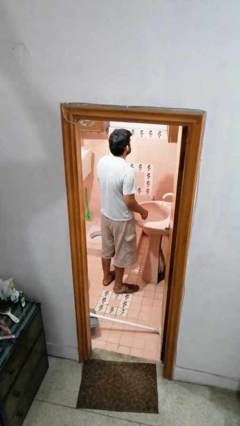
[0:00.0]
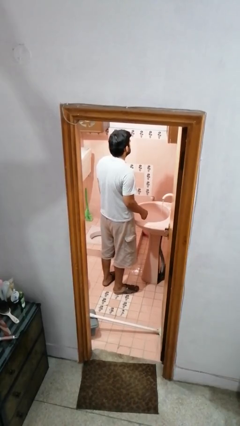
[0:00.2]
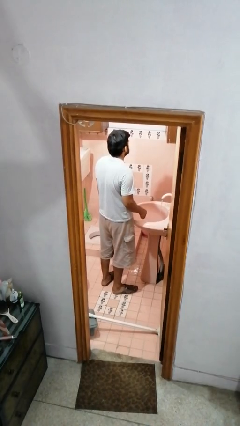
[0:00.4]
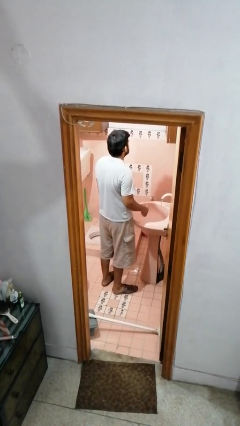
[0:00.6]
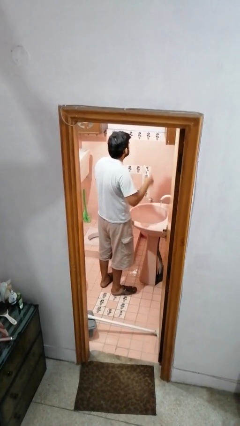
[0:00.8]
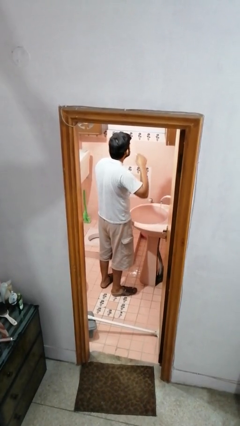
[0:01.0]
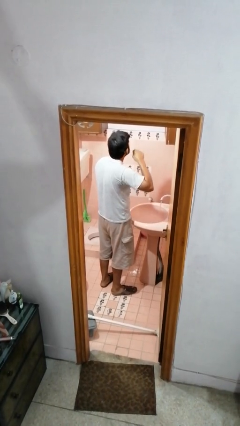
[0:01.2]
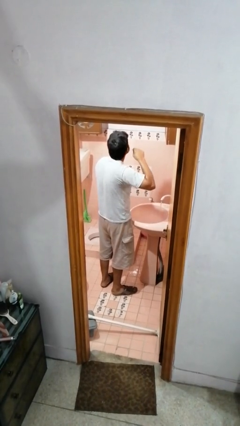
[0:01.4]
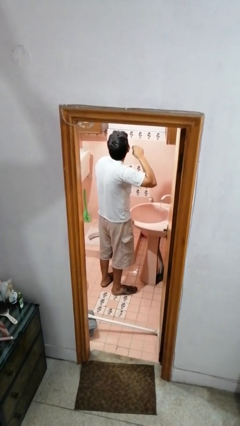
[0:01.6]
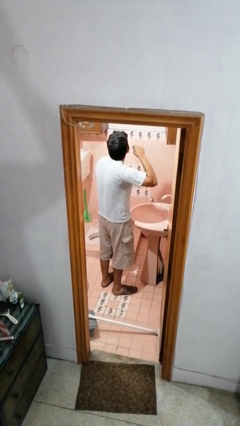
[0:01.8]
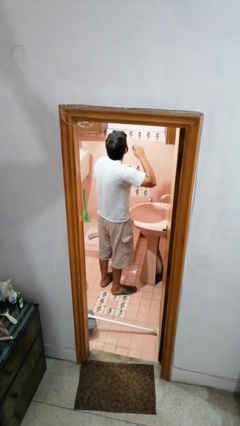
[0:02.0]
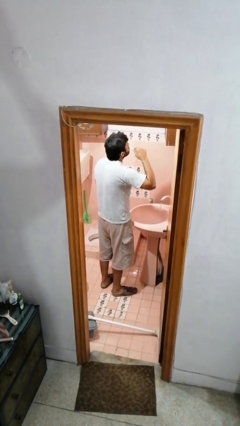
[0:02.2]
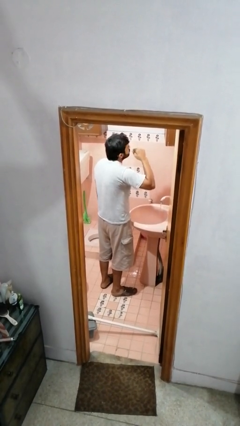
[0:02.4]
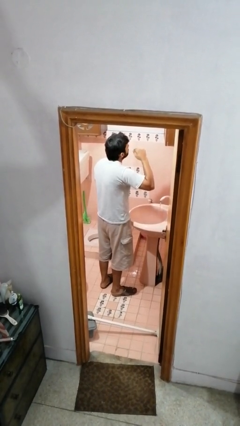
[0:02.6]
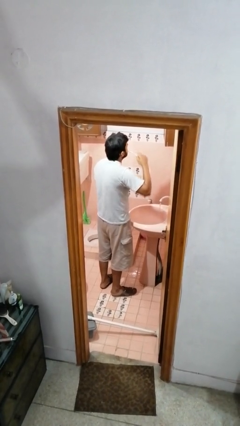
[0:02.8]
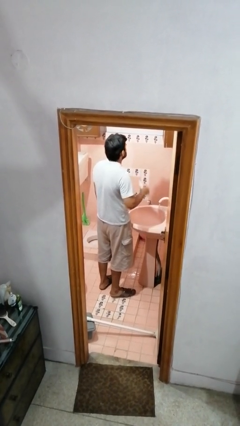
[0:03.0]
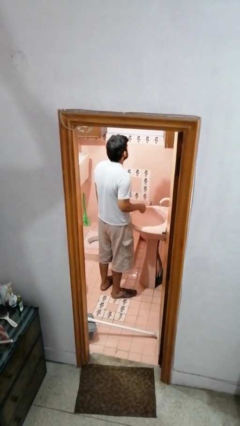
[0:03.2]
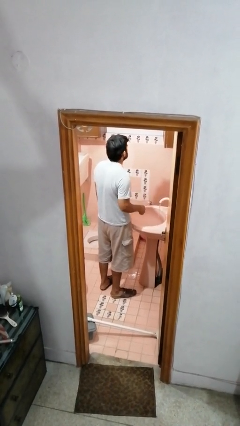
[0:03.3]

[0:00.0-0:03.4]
person brushes teeth

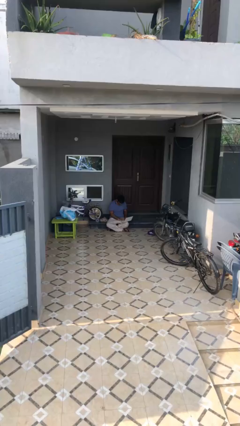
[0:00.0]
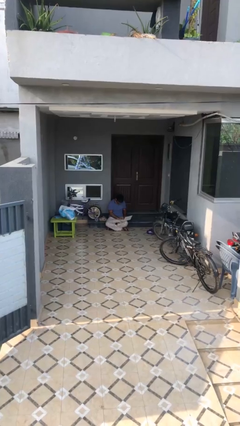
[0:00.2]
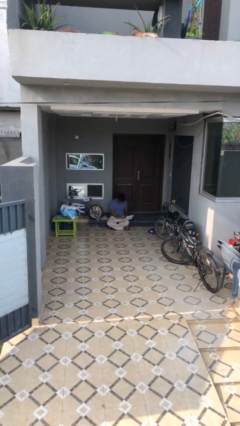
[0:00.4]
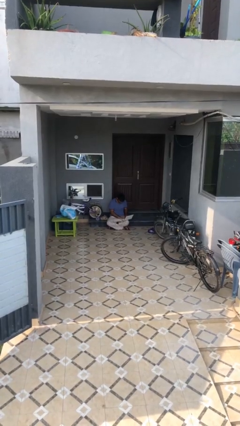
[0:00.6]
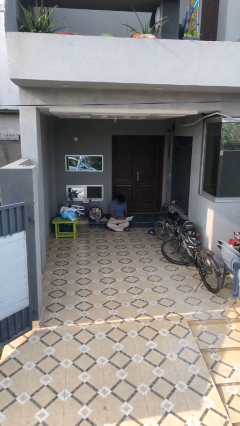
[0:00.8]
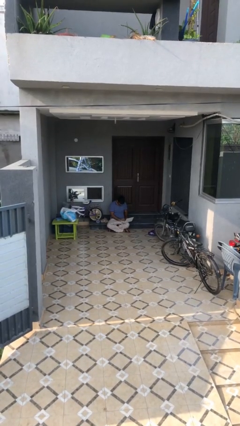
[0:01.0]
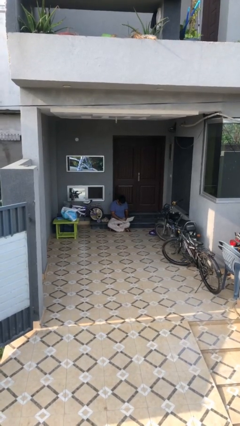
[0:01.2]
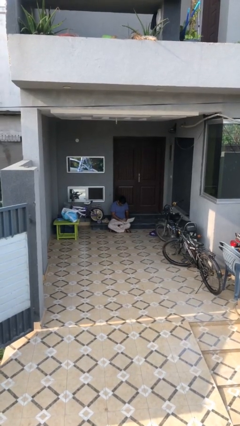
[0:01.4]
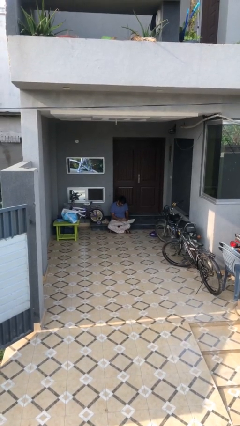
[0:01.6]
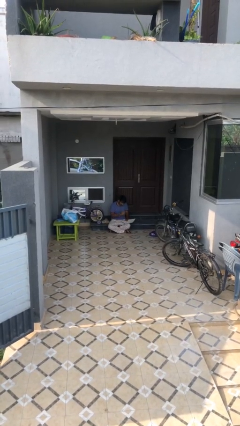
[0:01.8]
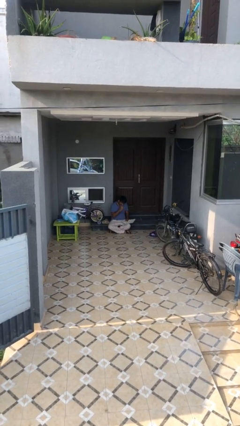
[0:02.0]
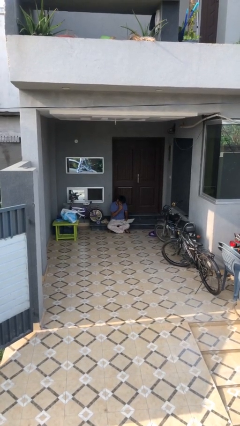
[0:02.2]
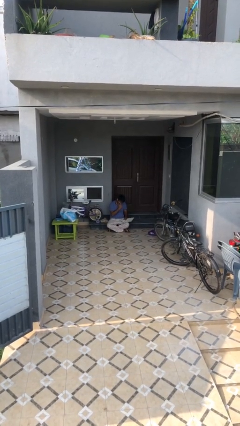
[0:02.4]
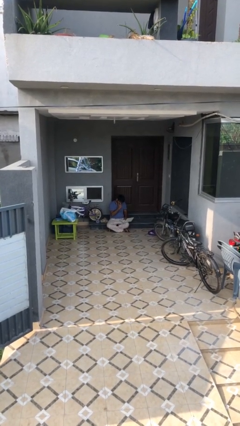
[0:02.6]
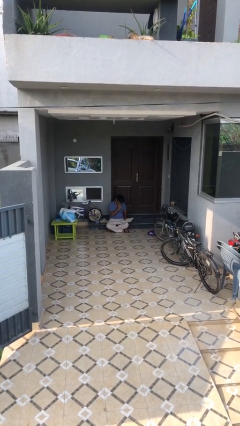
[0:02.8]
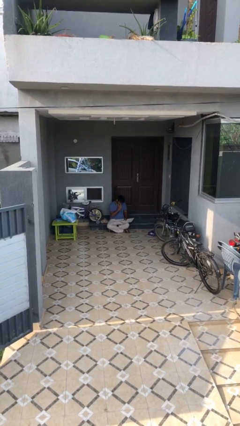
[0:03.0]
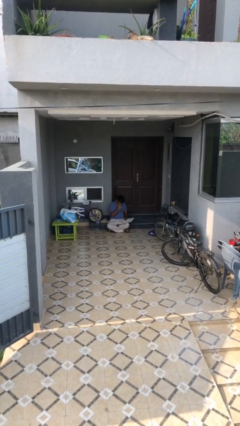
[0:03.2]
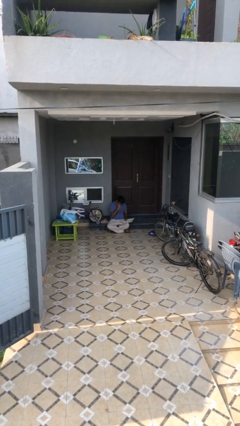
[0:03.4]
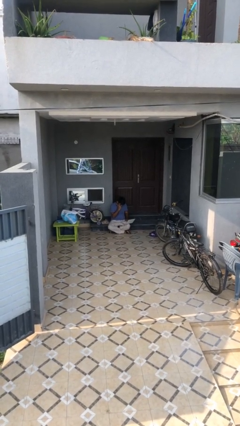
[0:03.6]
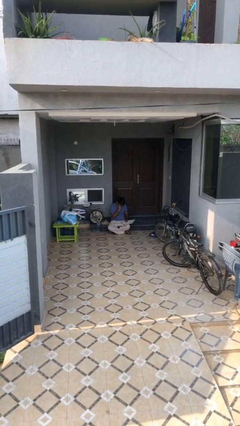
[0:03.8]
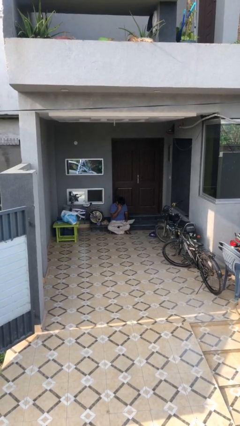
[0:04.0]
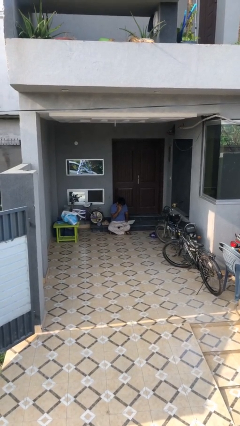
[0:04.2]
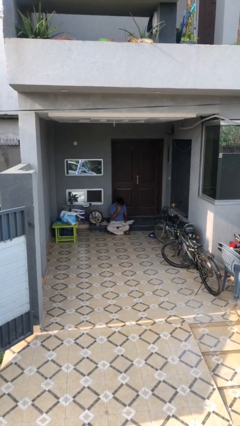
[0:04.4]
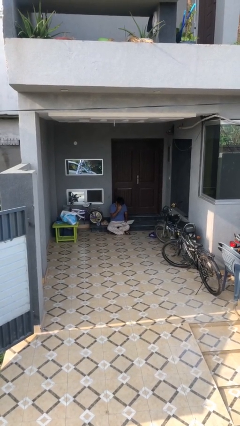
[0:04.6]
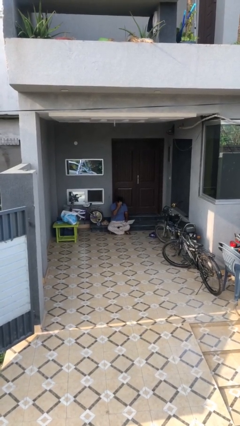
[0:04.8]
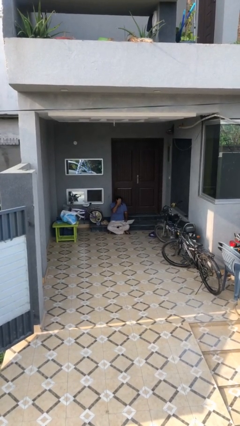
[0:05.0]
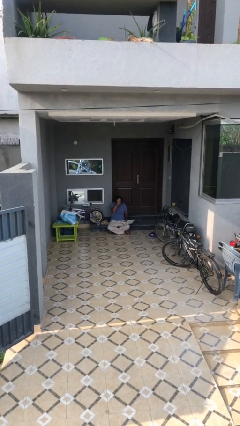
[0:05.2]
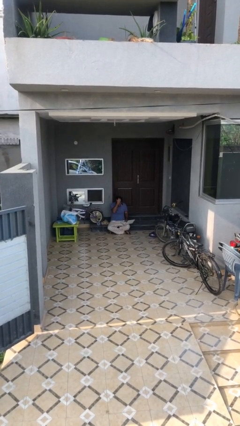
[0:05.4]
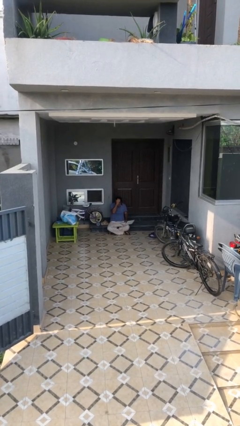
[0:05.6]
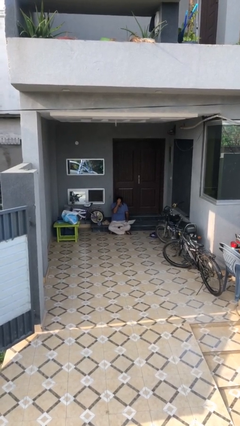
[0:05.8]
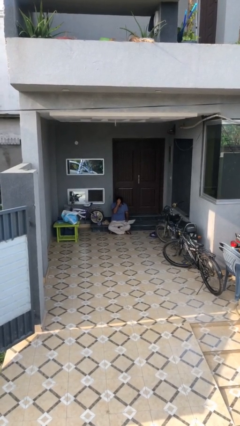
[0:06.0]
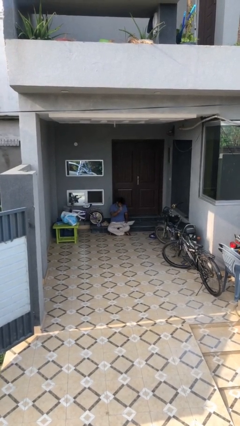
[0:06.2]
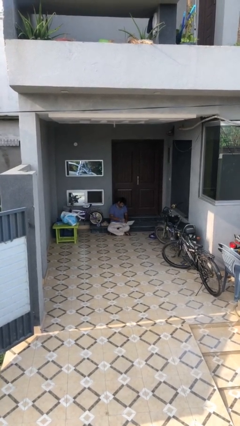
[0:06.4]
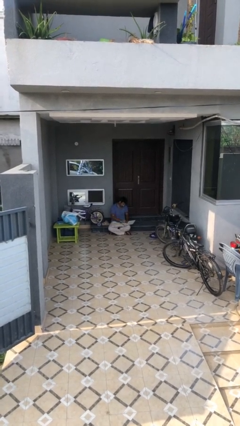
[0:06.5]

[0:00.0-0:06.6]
person interacts with laptop

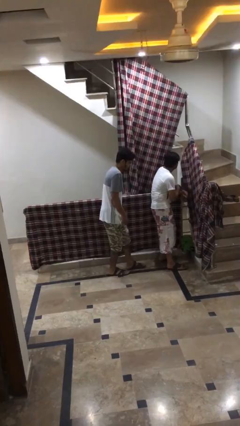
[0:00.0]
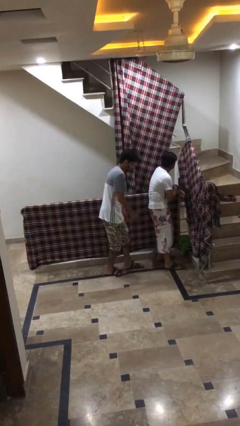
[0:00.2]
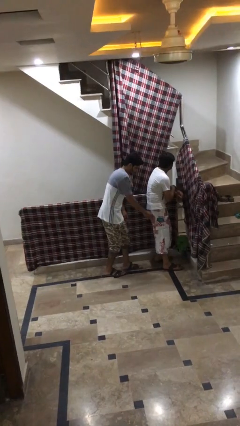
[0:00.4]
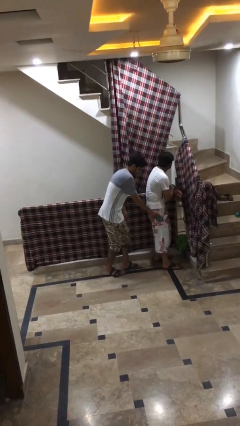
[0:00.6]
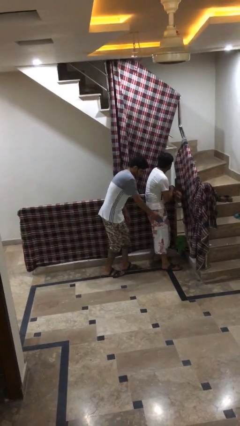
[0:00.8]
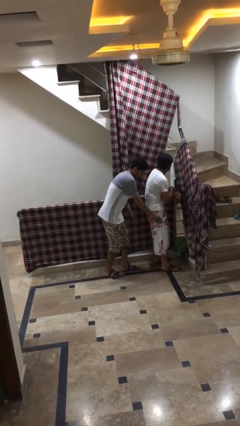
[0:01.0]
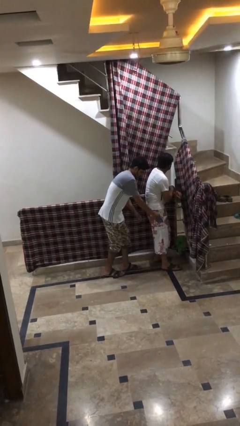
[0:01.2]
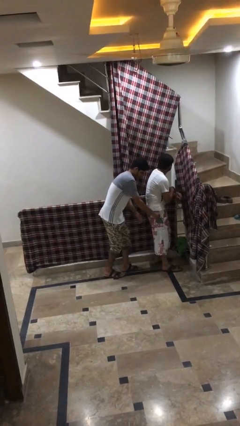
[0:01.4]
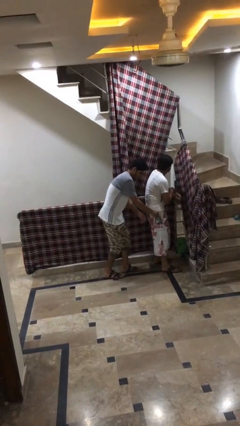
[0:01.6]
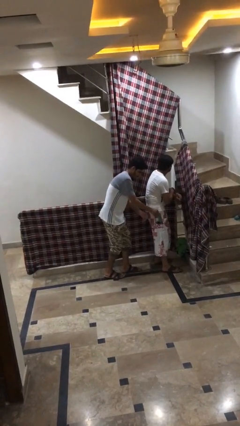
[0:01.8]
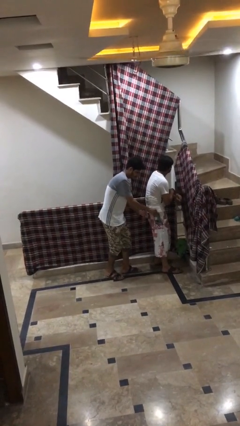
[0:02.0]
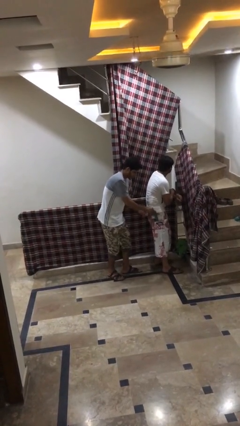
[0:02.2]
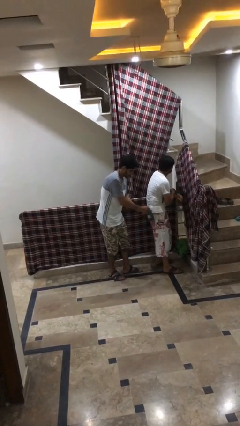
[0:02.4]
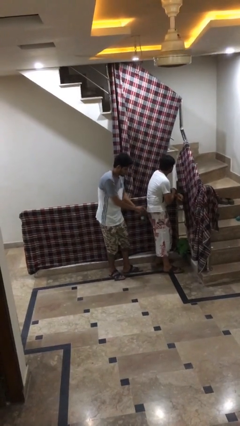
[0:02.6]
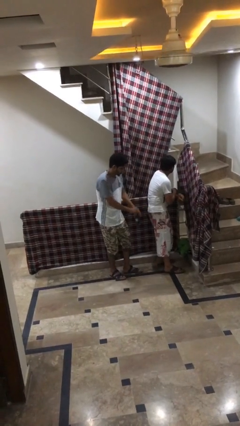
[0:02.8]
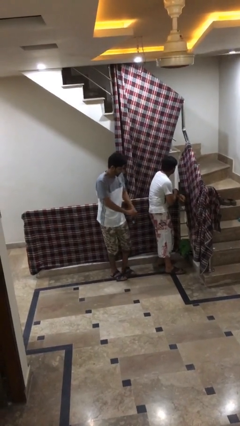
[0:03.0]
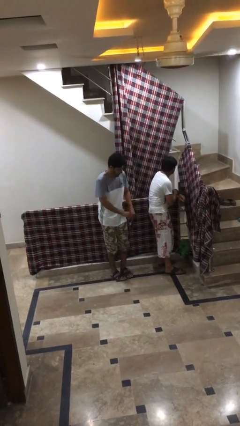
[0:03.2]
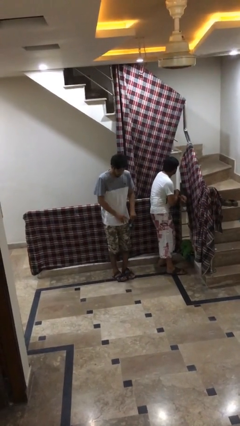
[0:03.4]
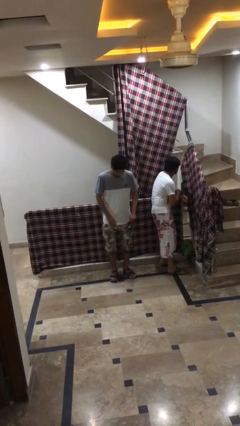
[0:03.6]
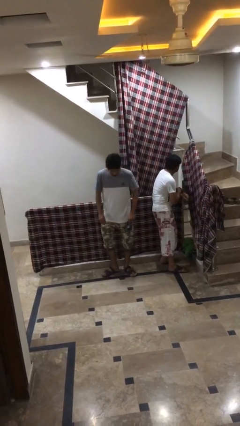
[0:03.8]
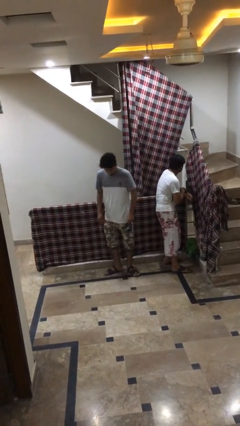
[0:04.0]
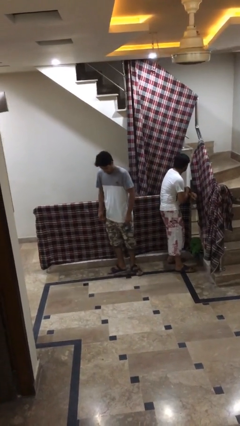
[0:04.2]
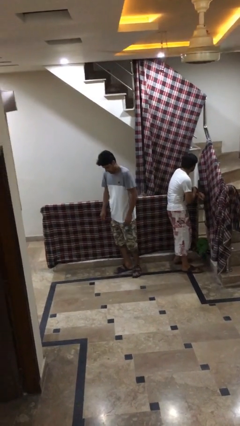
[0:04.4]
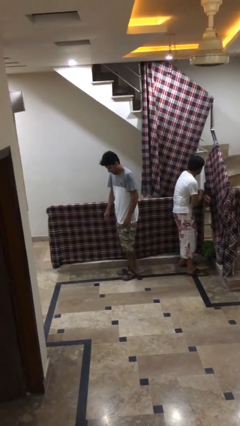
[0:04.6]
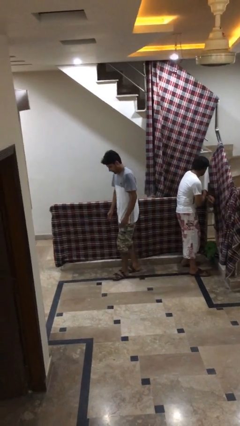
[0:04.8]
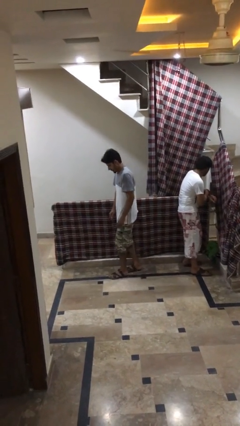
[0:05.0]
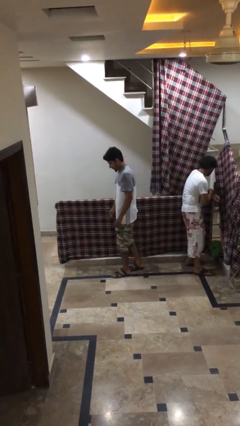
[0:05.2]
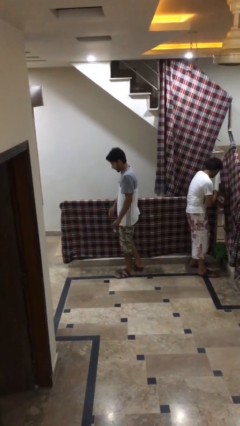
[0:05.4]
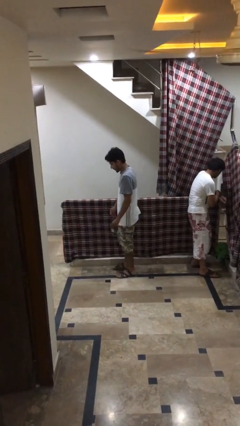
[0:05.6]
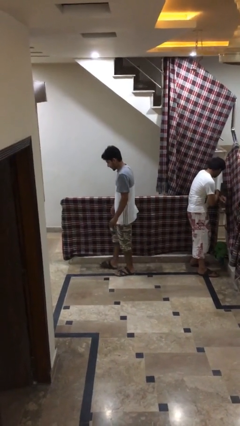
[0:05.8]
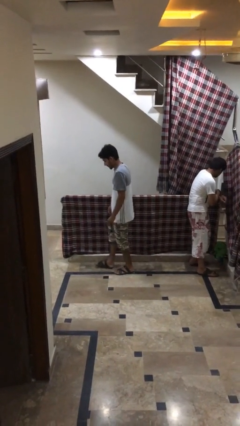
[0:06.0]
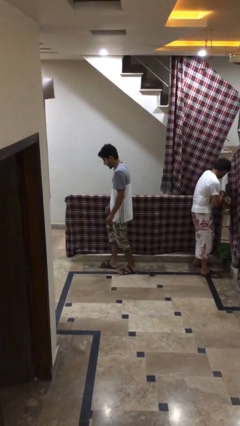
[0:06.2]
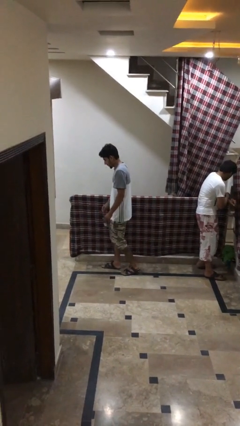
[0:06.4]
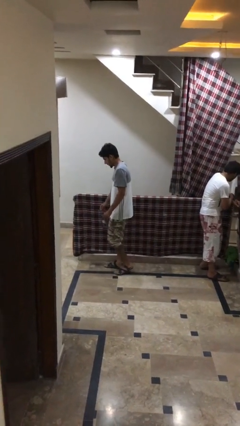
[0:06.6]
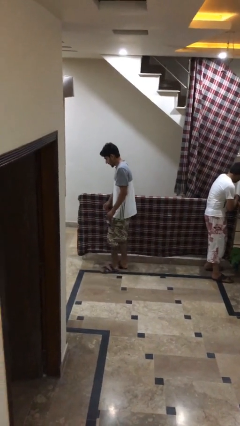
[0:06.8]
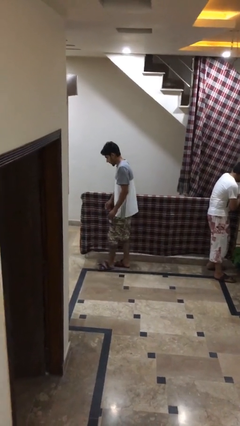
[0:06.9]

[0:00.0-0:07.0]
person steals object from person

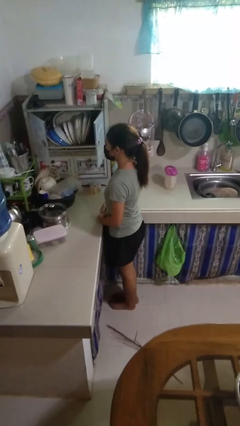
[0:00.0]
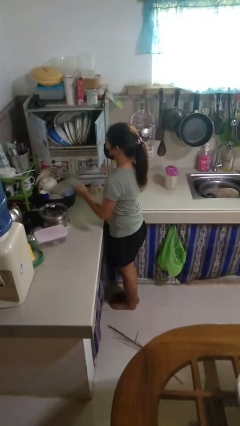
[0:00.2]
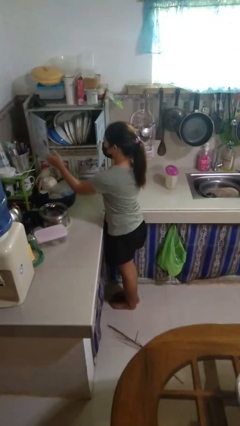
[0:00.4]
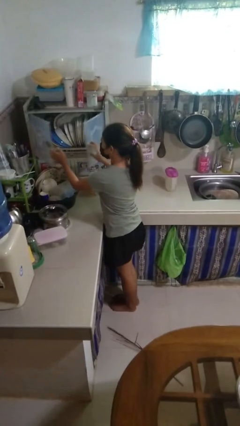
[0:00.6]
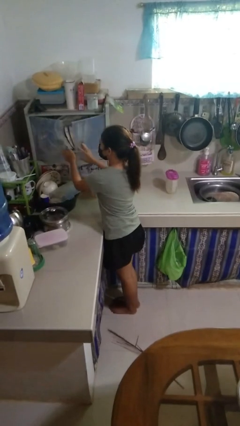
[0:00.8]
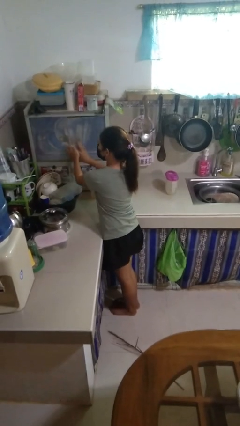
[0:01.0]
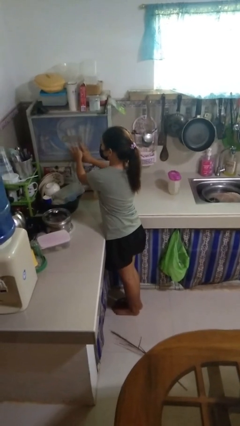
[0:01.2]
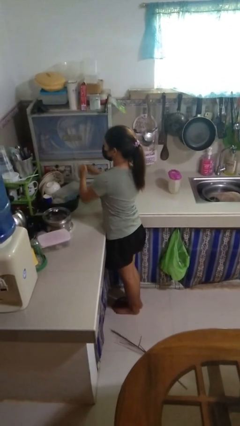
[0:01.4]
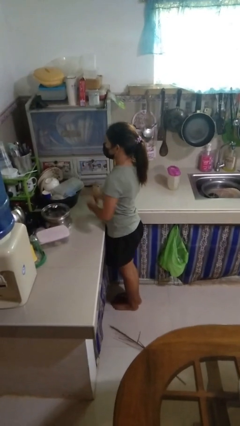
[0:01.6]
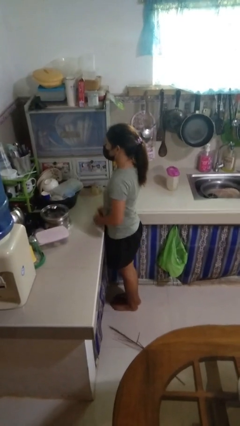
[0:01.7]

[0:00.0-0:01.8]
person closes kitchen drawer
